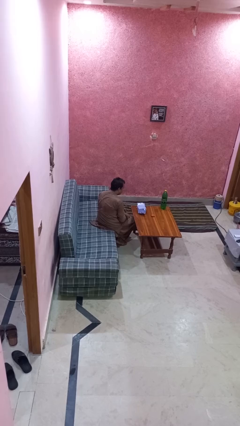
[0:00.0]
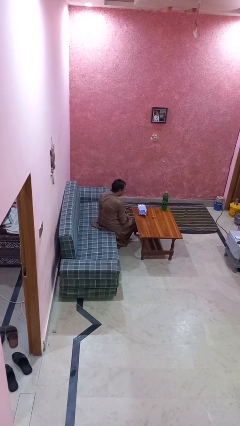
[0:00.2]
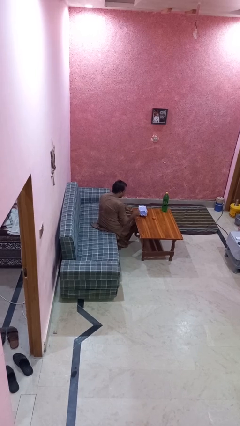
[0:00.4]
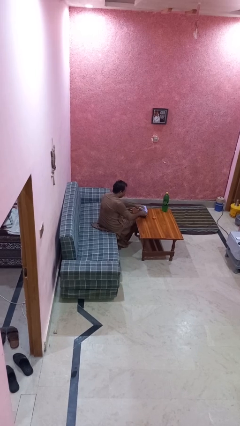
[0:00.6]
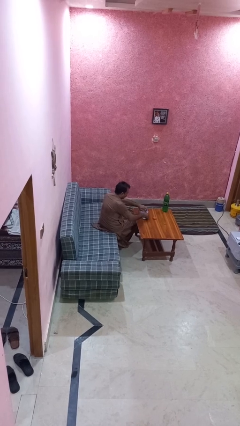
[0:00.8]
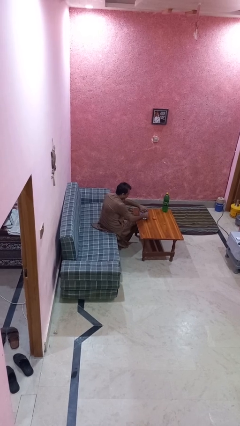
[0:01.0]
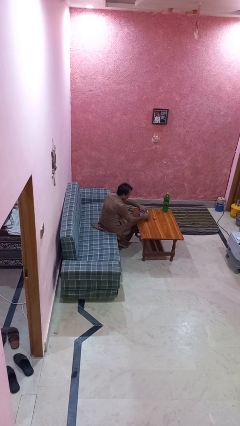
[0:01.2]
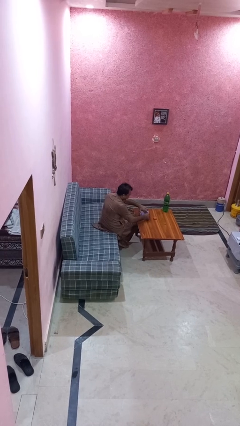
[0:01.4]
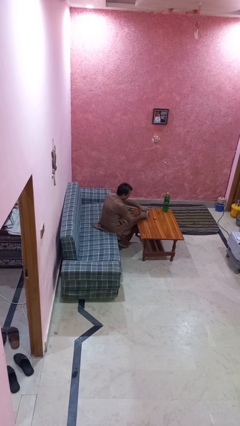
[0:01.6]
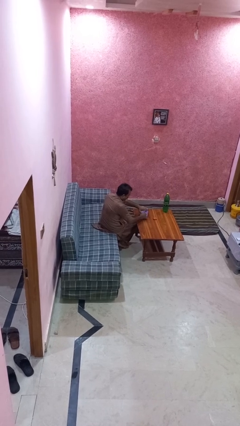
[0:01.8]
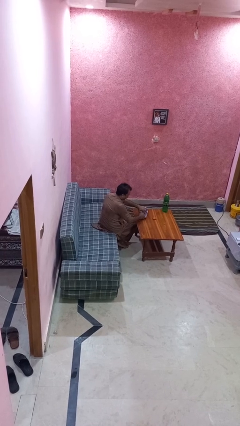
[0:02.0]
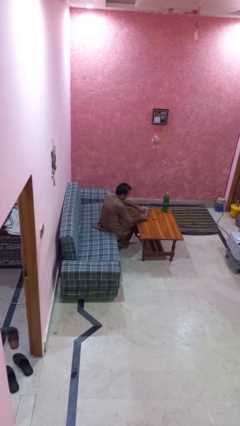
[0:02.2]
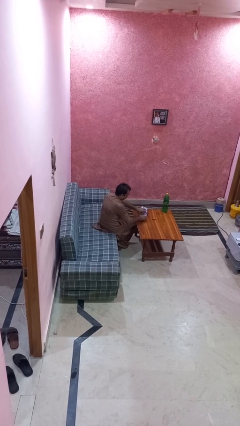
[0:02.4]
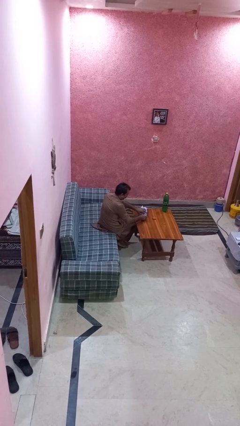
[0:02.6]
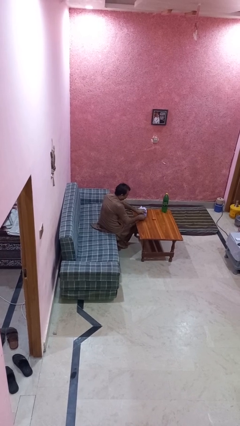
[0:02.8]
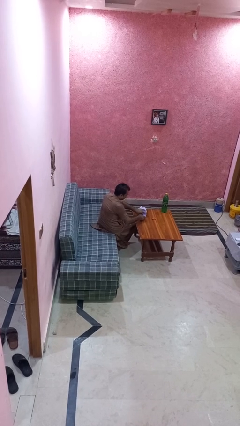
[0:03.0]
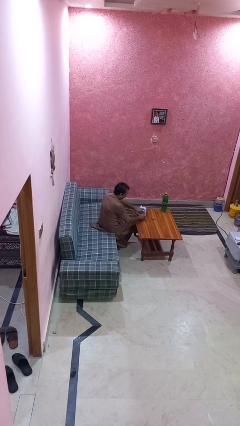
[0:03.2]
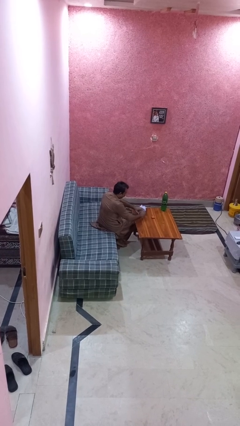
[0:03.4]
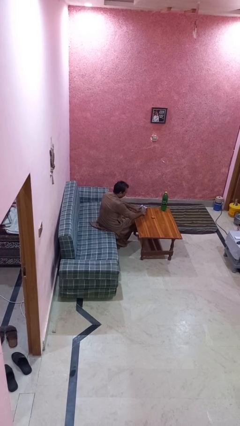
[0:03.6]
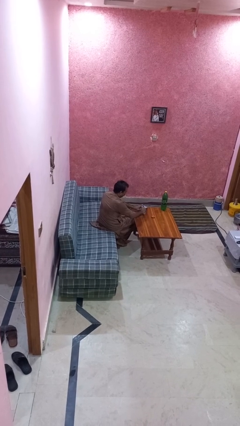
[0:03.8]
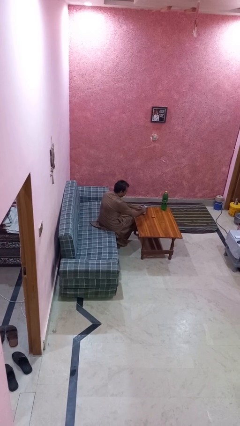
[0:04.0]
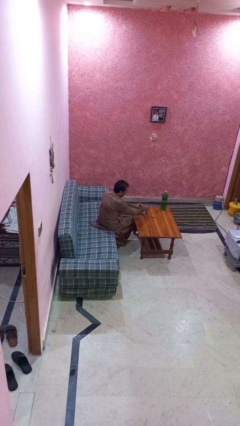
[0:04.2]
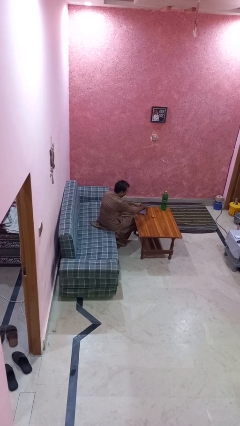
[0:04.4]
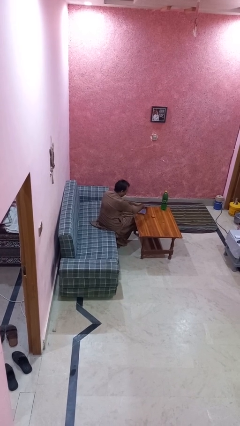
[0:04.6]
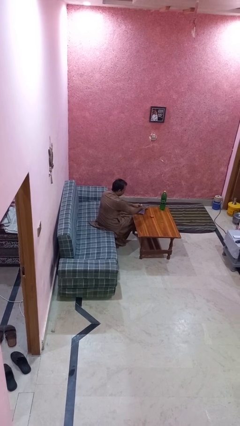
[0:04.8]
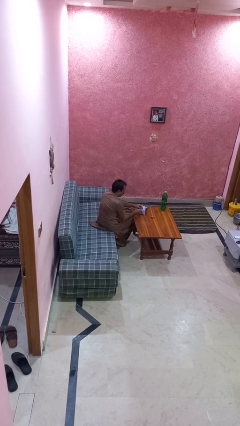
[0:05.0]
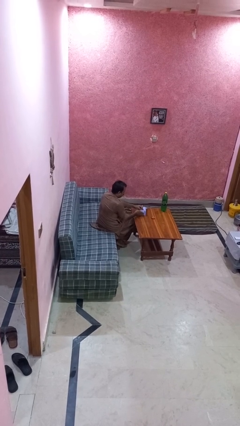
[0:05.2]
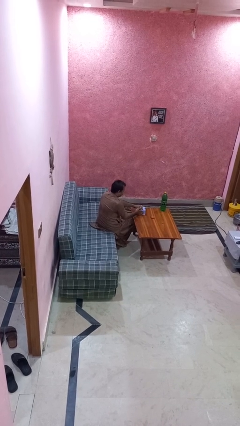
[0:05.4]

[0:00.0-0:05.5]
person wraps box

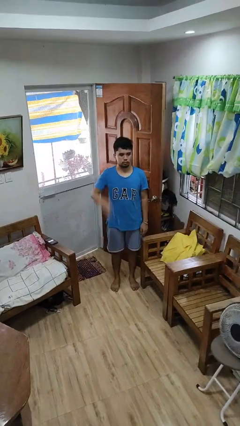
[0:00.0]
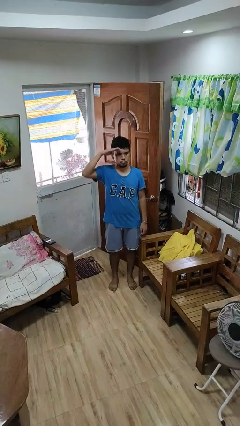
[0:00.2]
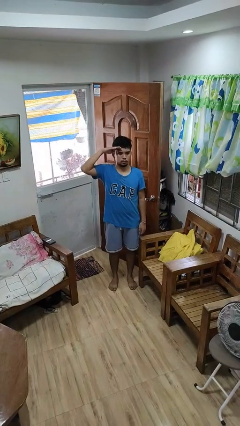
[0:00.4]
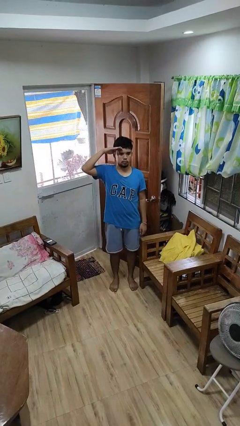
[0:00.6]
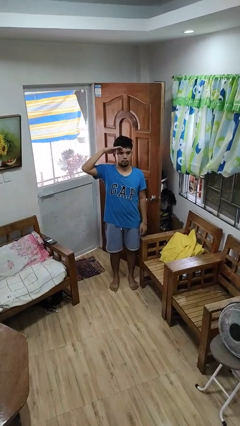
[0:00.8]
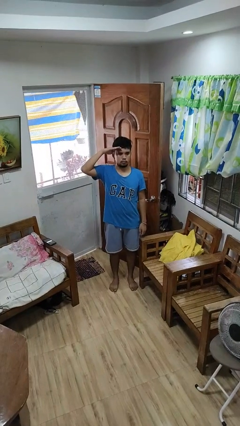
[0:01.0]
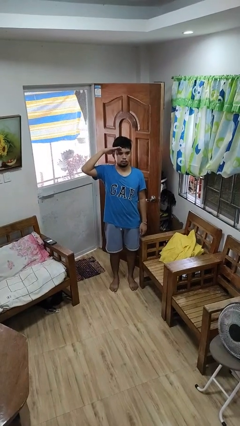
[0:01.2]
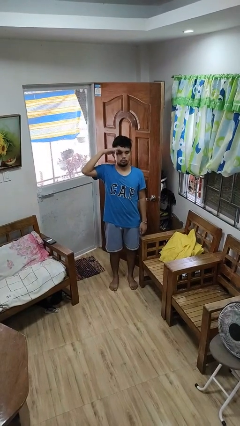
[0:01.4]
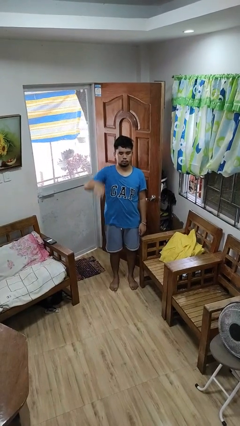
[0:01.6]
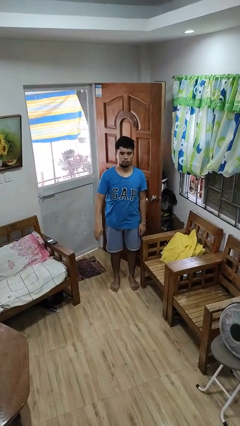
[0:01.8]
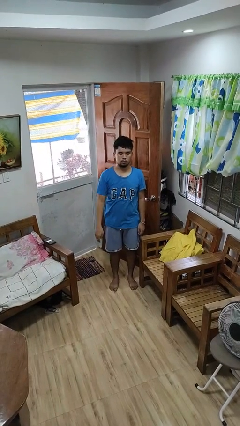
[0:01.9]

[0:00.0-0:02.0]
person salutes

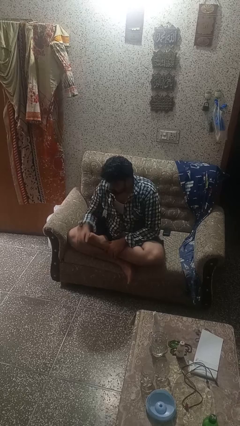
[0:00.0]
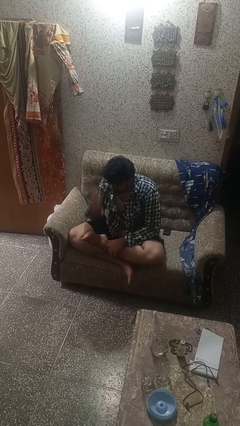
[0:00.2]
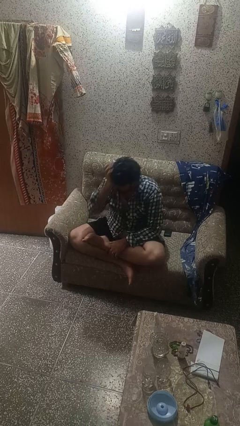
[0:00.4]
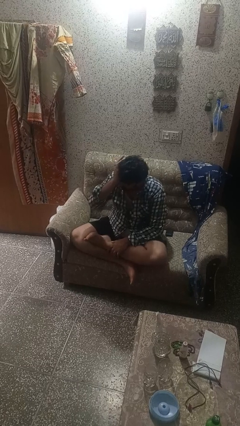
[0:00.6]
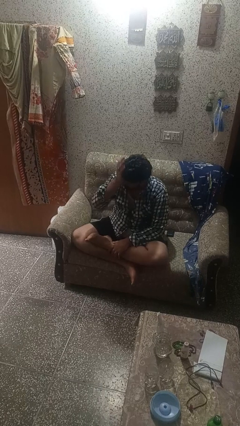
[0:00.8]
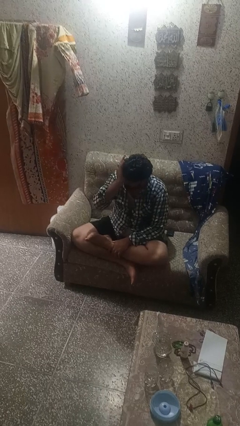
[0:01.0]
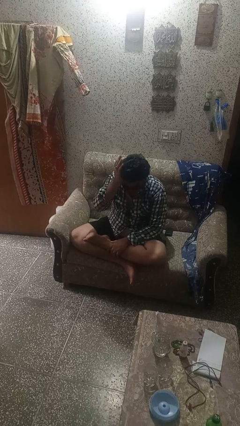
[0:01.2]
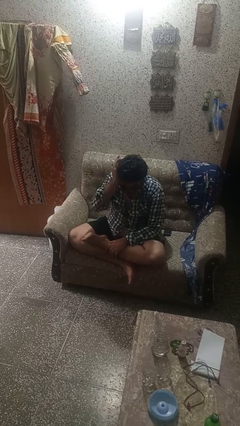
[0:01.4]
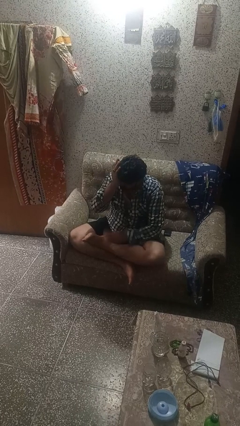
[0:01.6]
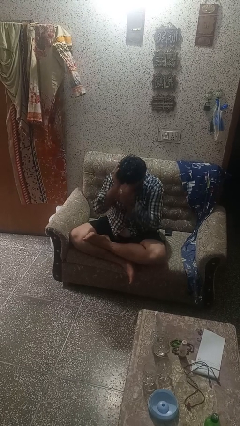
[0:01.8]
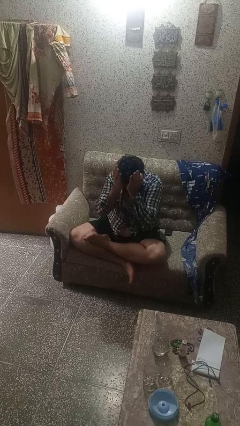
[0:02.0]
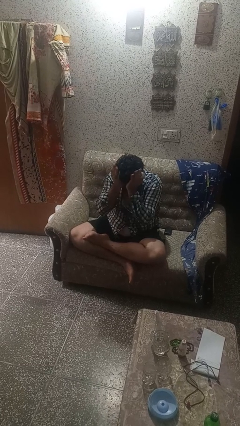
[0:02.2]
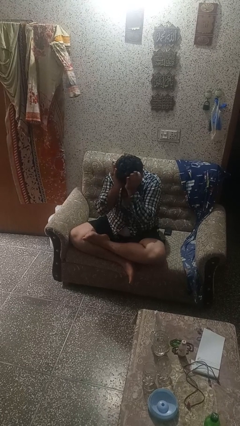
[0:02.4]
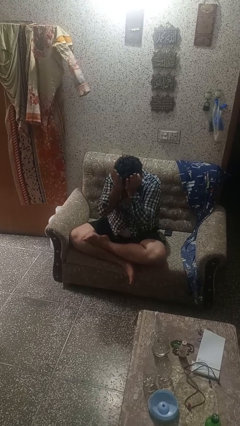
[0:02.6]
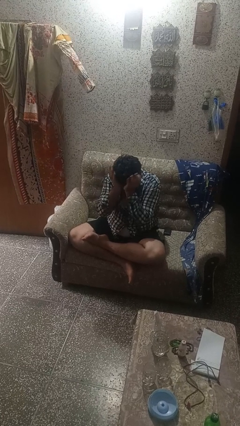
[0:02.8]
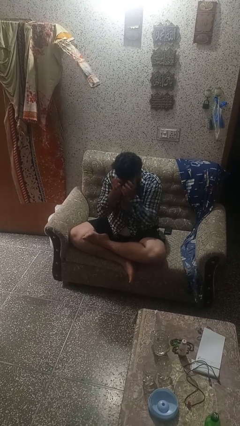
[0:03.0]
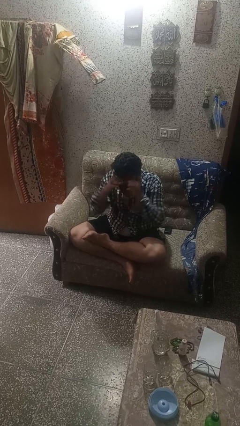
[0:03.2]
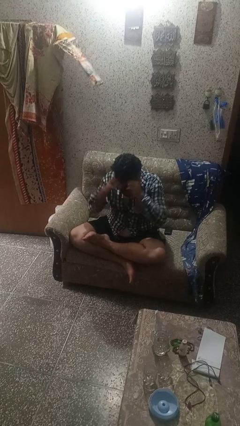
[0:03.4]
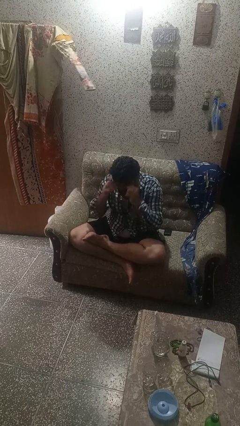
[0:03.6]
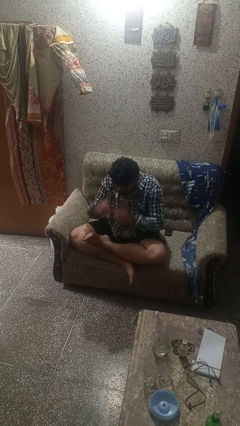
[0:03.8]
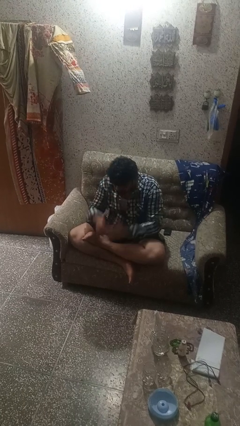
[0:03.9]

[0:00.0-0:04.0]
person rubs eyes

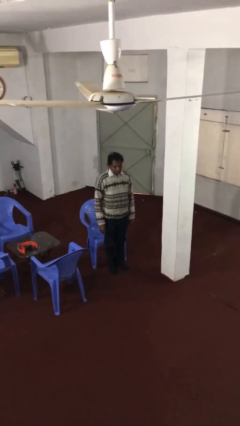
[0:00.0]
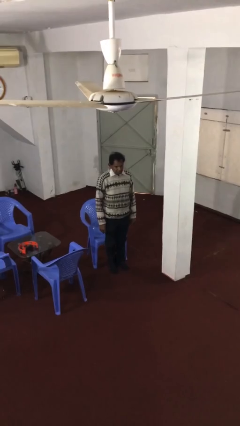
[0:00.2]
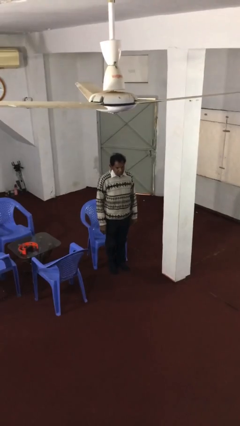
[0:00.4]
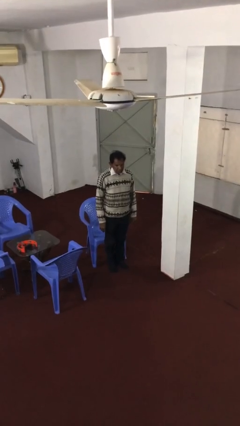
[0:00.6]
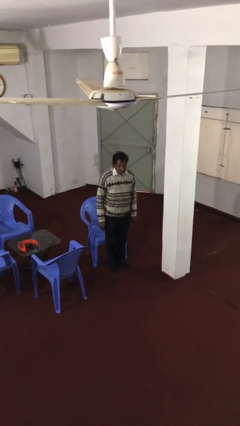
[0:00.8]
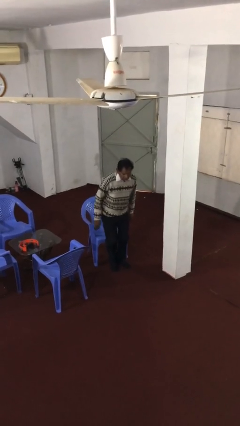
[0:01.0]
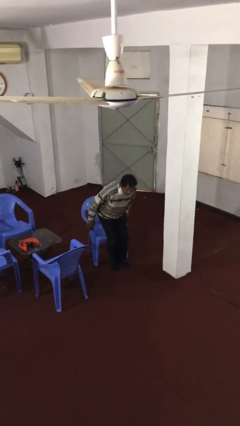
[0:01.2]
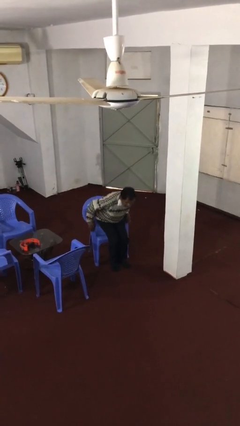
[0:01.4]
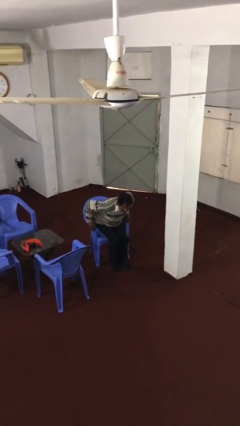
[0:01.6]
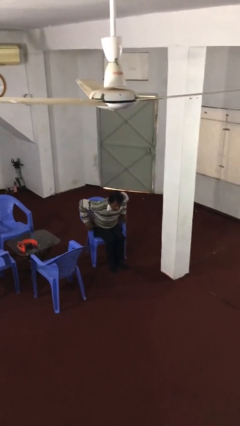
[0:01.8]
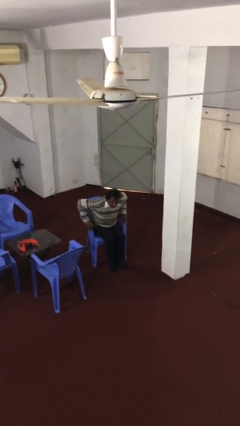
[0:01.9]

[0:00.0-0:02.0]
person sits down

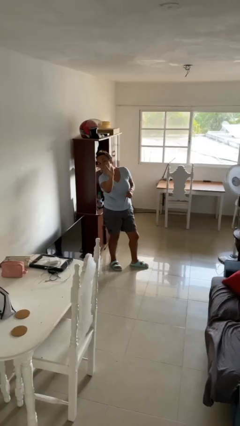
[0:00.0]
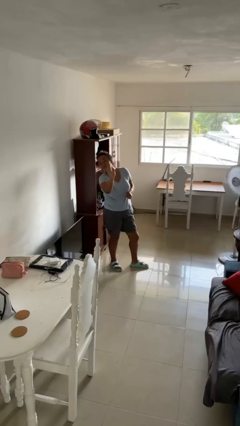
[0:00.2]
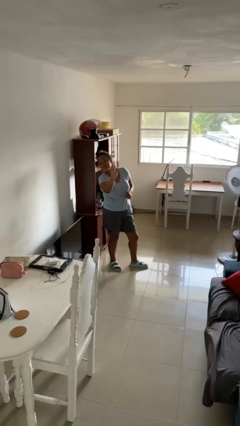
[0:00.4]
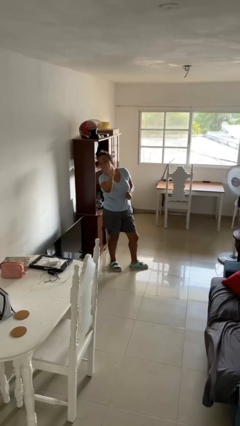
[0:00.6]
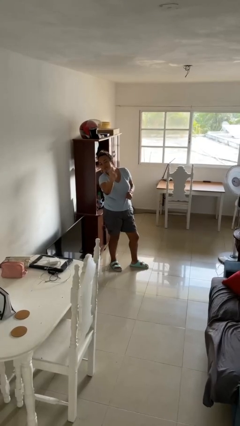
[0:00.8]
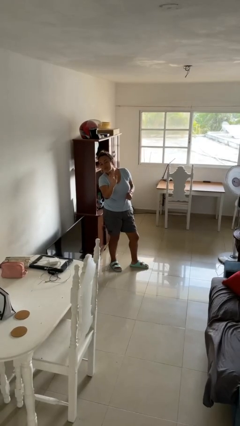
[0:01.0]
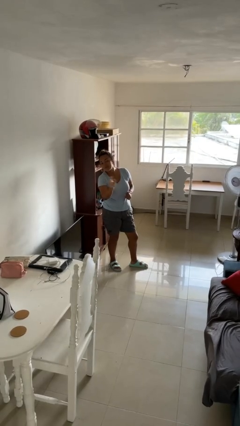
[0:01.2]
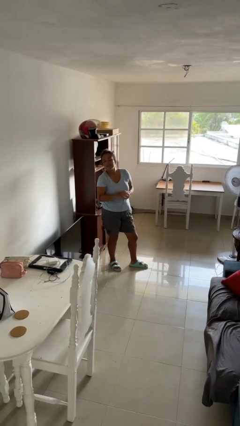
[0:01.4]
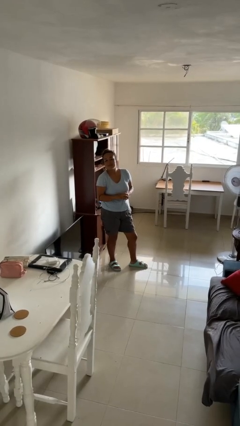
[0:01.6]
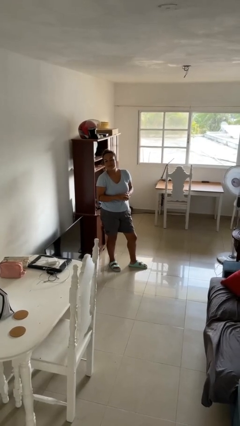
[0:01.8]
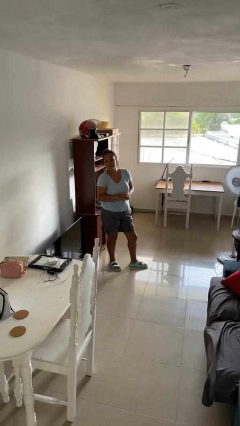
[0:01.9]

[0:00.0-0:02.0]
person waves at person

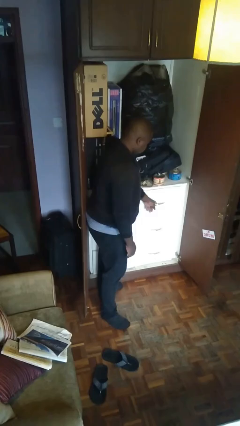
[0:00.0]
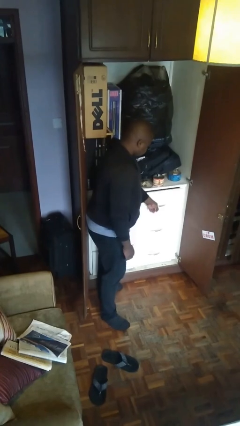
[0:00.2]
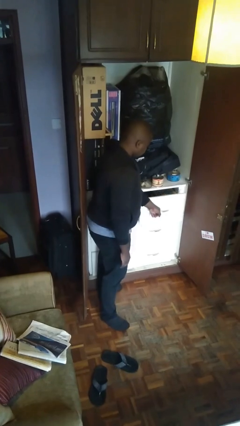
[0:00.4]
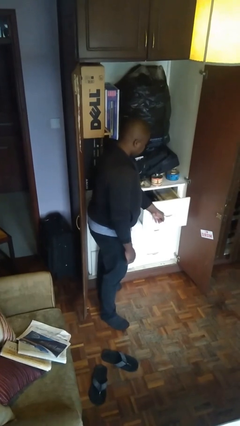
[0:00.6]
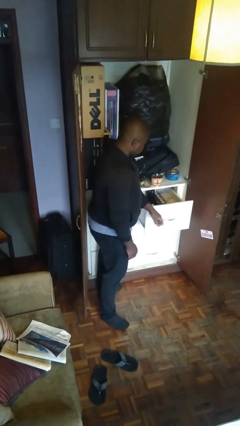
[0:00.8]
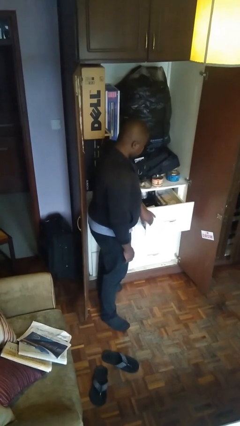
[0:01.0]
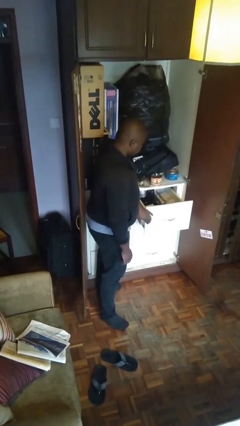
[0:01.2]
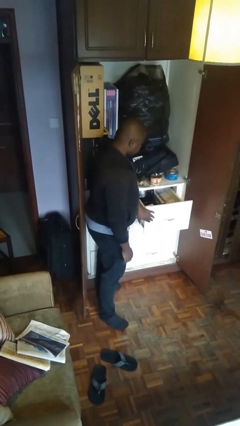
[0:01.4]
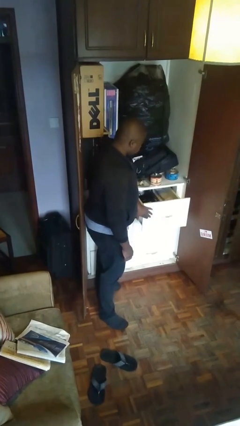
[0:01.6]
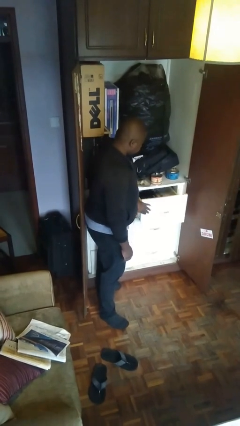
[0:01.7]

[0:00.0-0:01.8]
person opens dresser drawer
